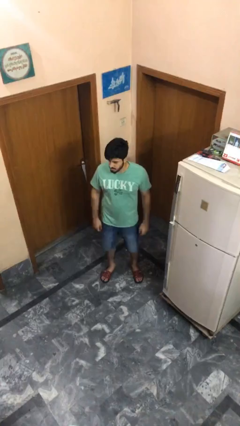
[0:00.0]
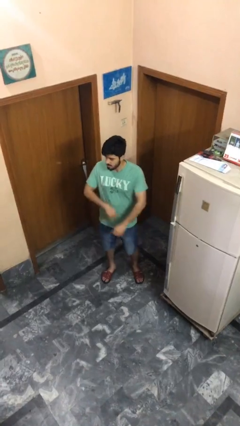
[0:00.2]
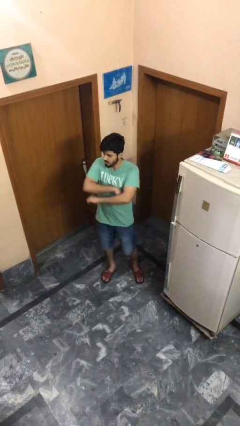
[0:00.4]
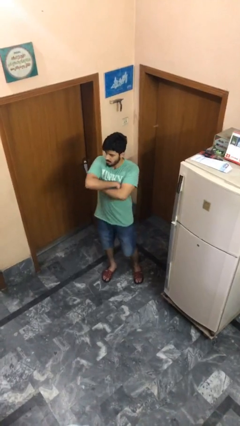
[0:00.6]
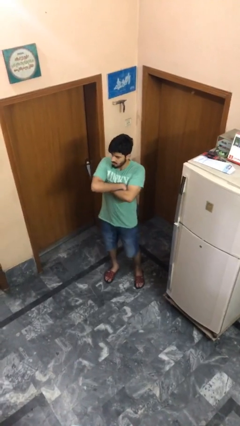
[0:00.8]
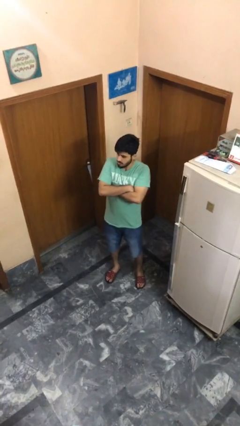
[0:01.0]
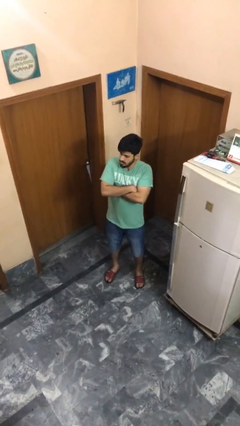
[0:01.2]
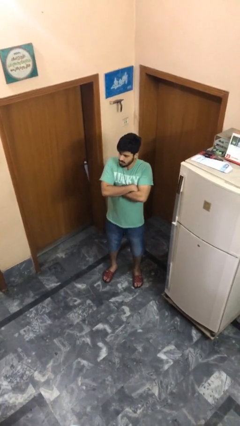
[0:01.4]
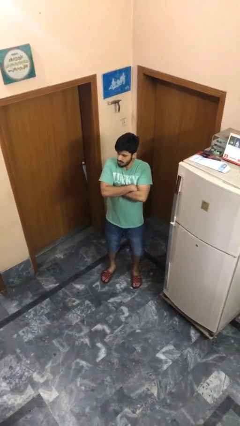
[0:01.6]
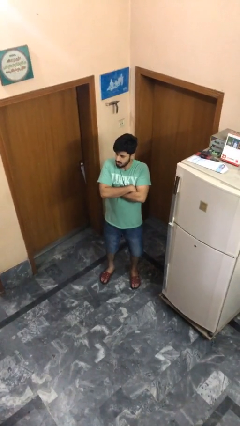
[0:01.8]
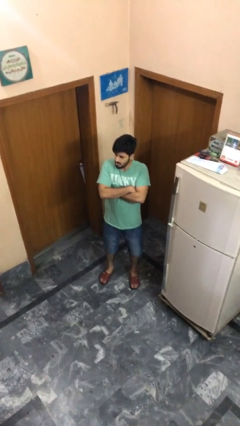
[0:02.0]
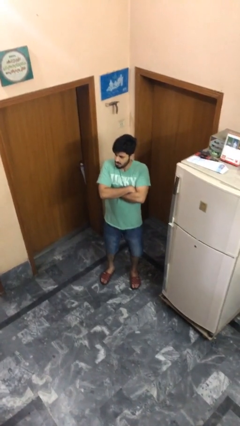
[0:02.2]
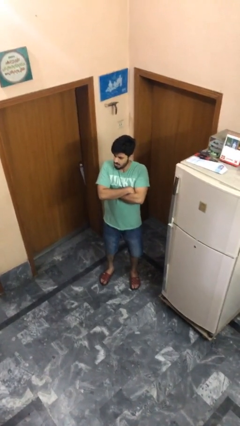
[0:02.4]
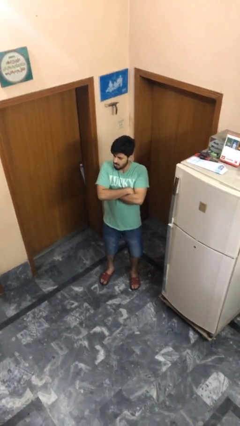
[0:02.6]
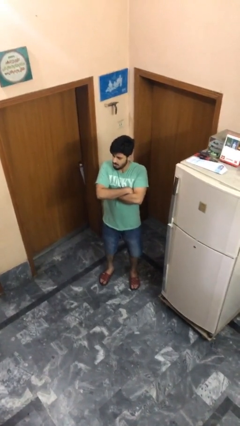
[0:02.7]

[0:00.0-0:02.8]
person crosses arms

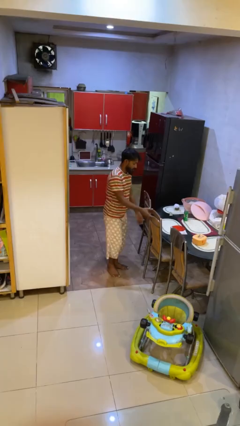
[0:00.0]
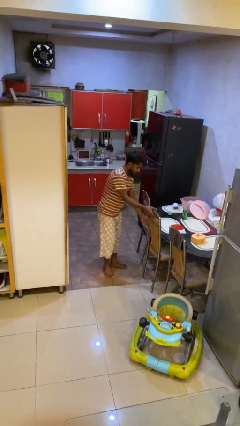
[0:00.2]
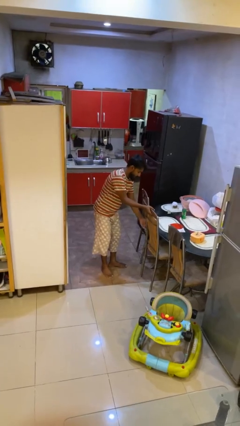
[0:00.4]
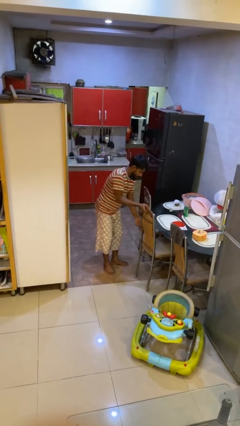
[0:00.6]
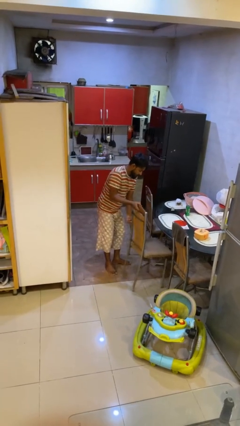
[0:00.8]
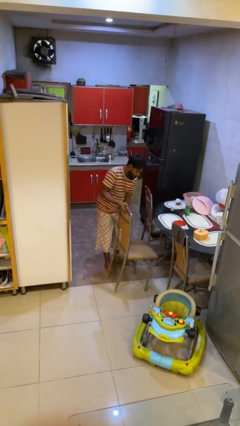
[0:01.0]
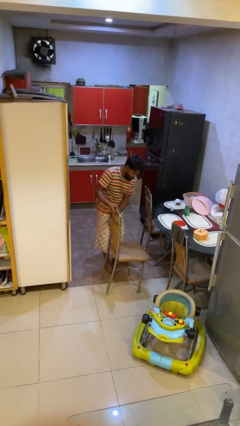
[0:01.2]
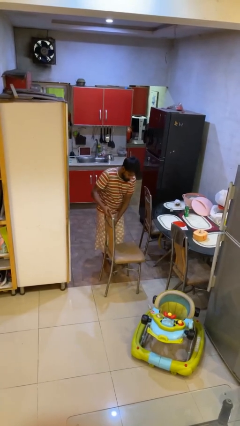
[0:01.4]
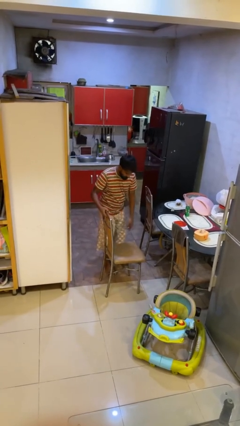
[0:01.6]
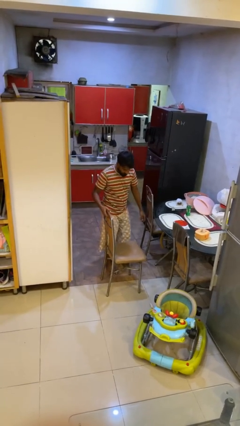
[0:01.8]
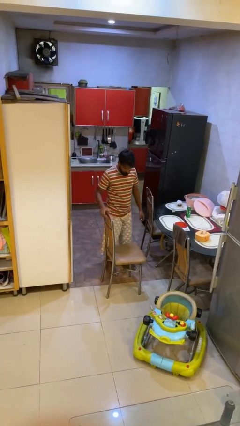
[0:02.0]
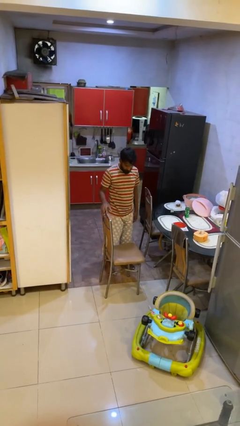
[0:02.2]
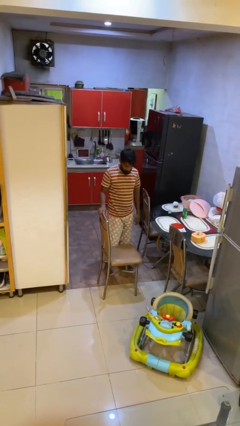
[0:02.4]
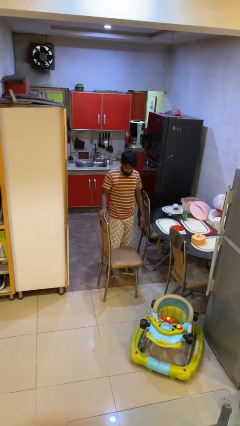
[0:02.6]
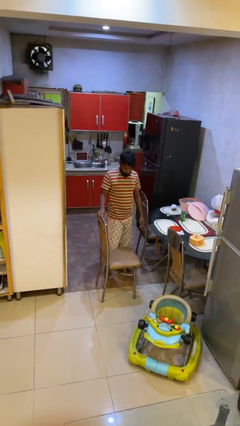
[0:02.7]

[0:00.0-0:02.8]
person pulls out chair

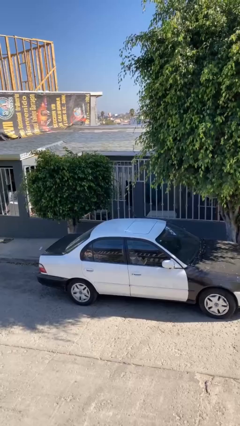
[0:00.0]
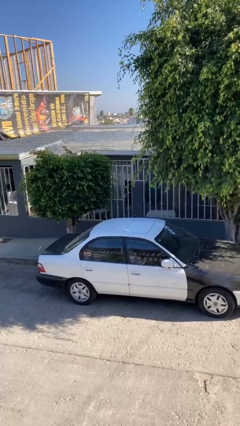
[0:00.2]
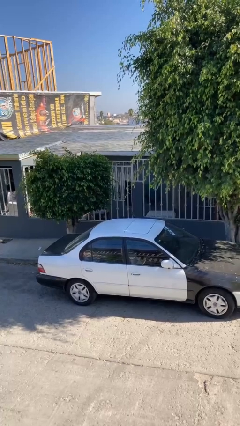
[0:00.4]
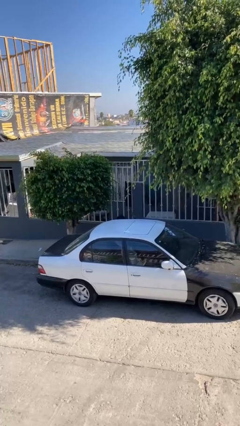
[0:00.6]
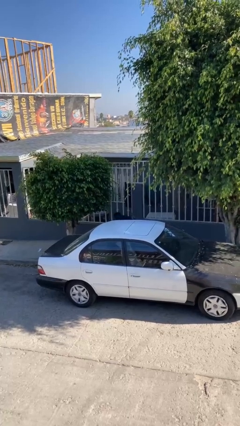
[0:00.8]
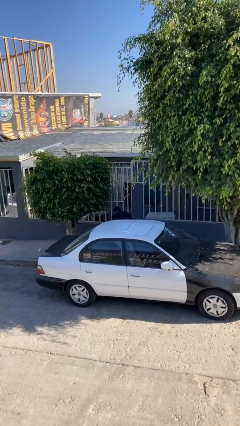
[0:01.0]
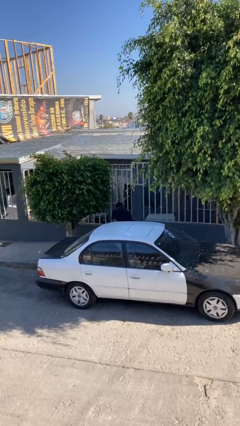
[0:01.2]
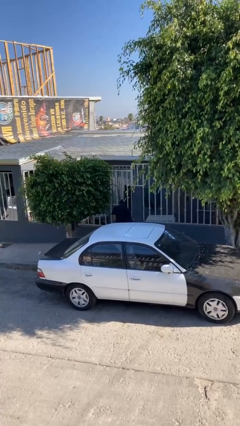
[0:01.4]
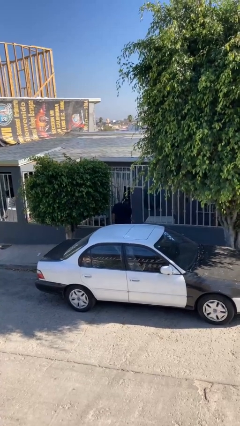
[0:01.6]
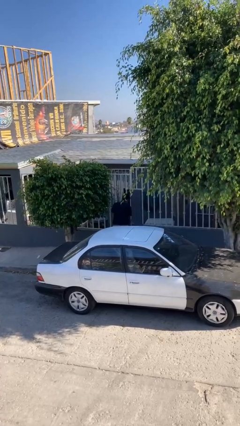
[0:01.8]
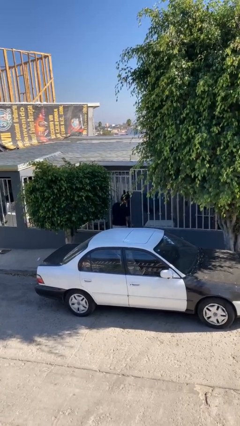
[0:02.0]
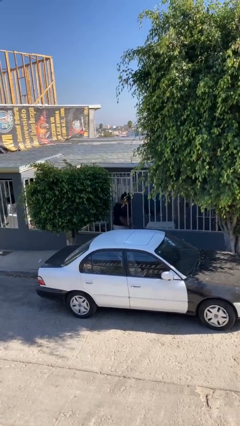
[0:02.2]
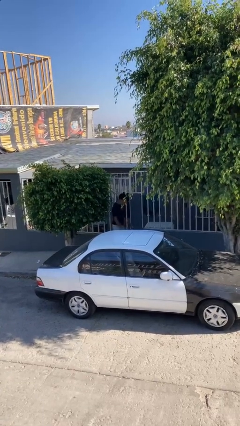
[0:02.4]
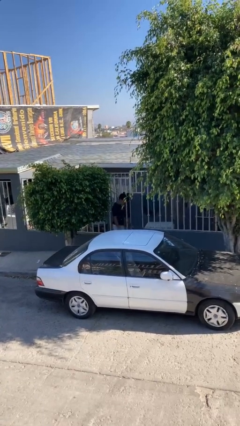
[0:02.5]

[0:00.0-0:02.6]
person exits car

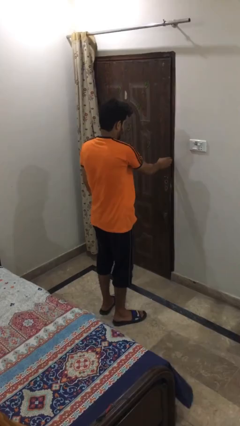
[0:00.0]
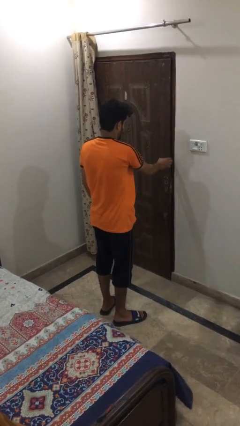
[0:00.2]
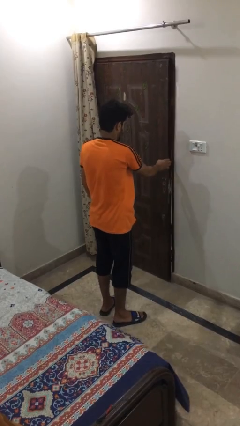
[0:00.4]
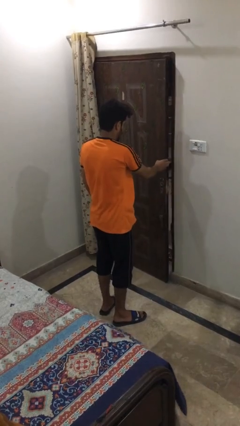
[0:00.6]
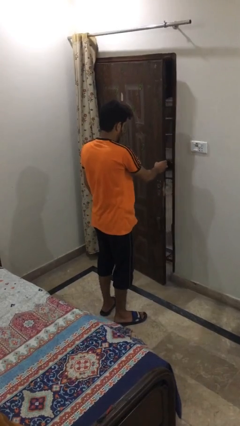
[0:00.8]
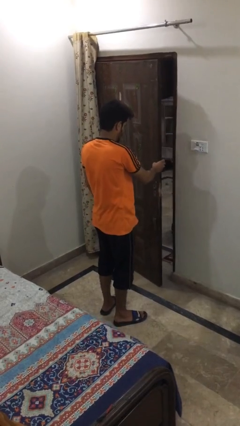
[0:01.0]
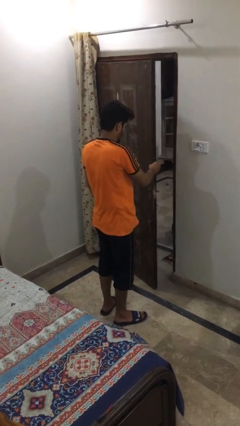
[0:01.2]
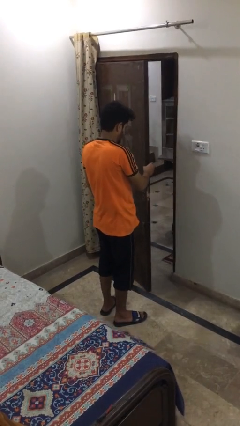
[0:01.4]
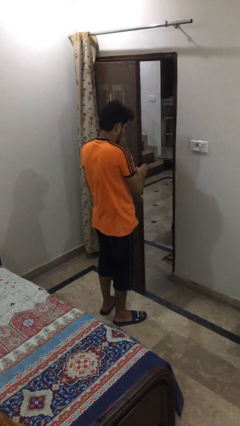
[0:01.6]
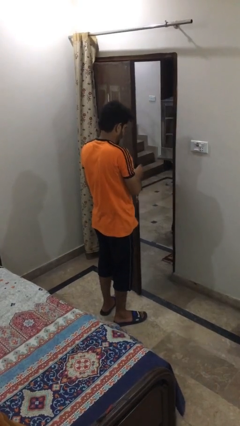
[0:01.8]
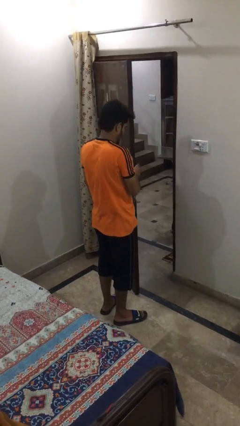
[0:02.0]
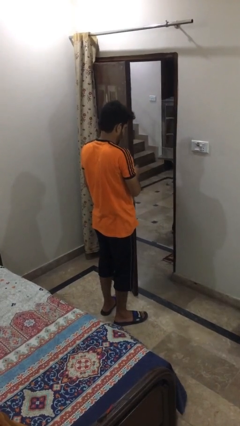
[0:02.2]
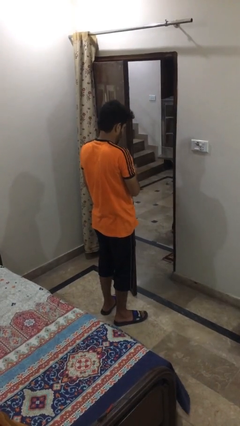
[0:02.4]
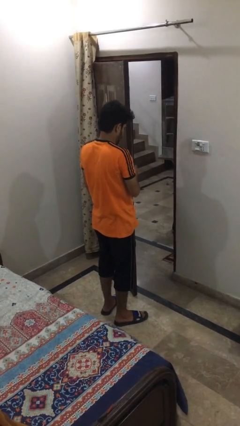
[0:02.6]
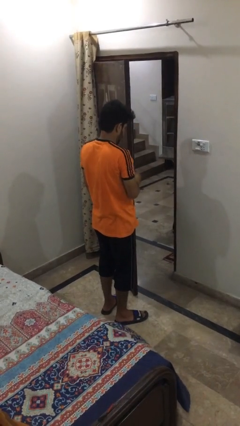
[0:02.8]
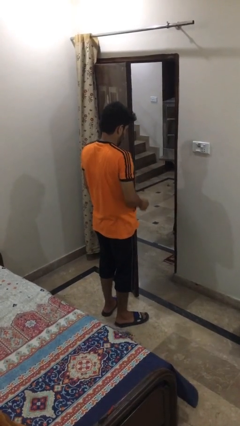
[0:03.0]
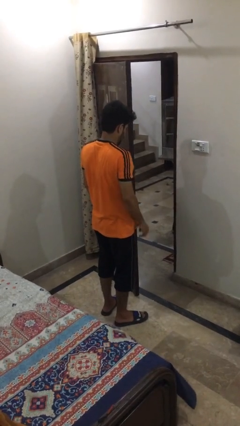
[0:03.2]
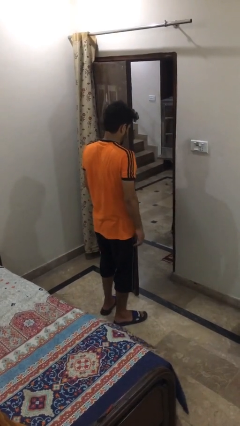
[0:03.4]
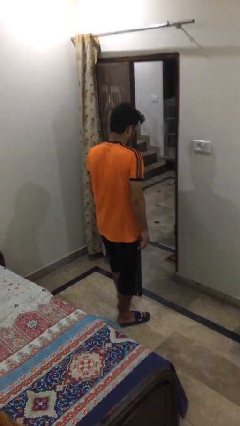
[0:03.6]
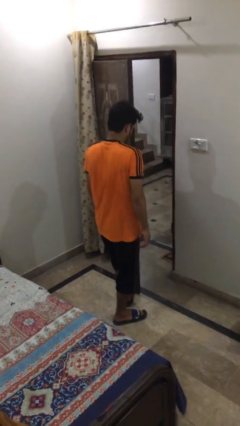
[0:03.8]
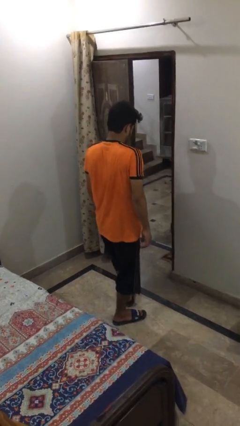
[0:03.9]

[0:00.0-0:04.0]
person opens facility door

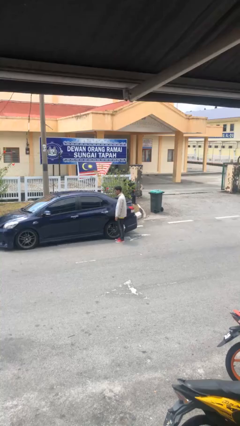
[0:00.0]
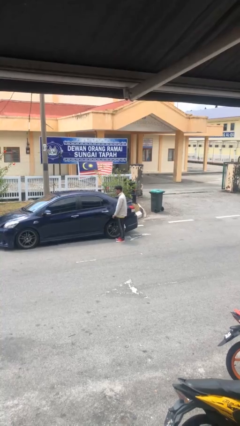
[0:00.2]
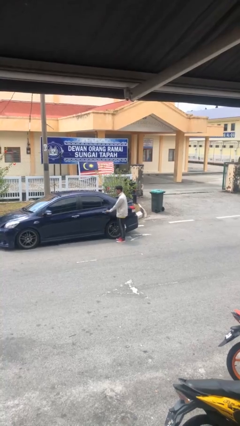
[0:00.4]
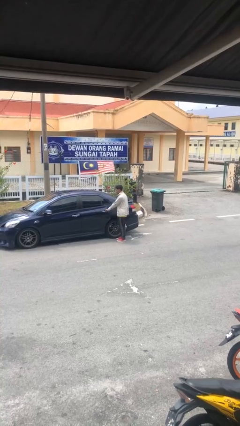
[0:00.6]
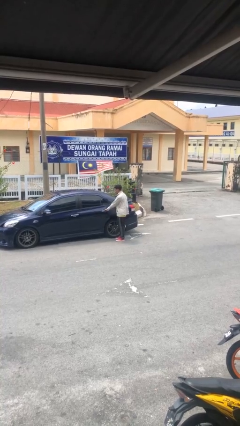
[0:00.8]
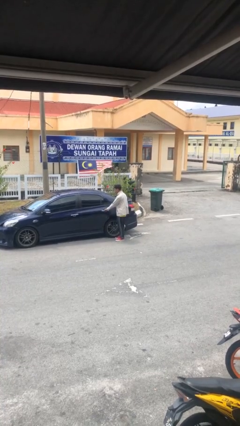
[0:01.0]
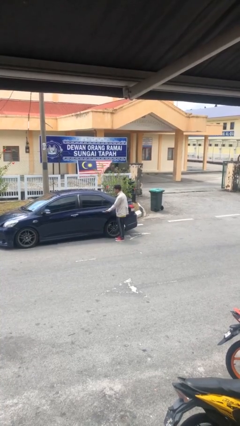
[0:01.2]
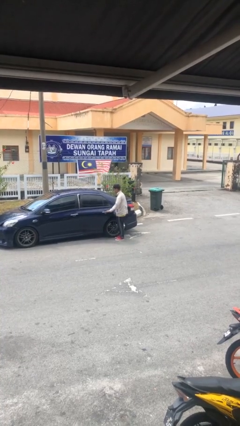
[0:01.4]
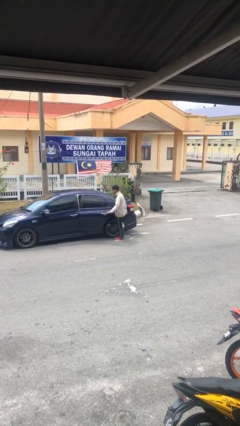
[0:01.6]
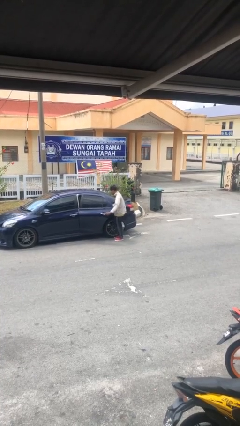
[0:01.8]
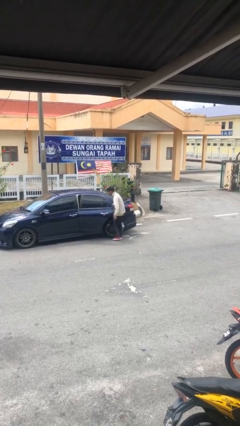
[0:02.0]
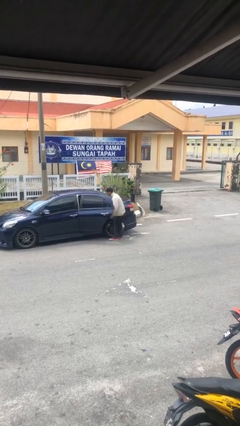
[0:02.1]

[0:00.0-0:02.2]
person opens car door

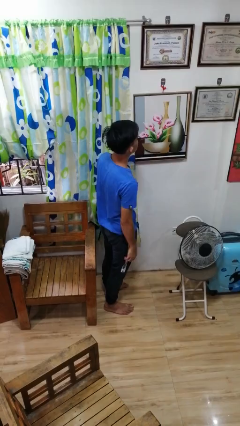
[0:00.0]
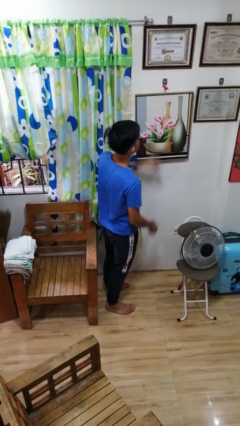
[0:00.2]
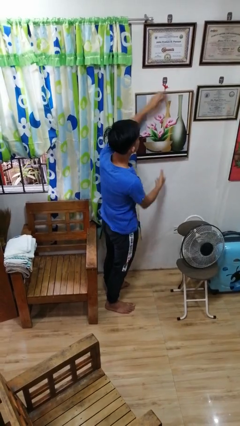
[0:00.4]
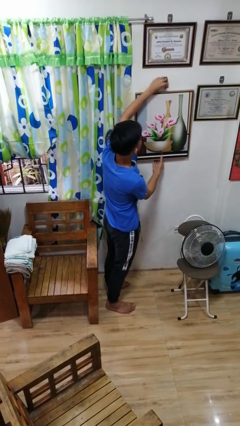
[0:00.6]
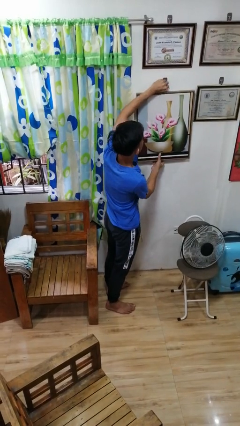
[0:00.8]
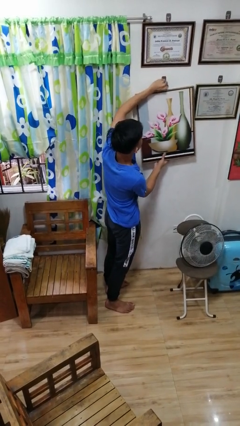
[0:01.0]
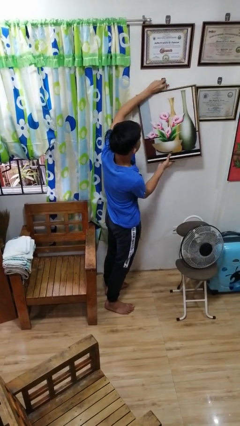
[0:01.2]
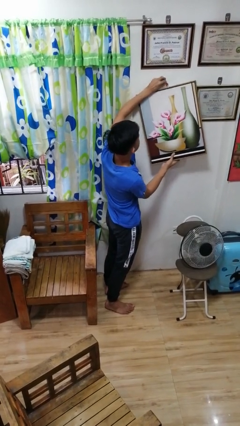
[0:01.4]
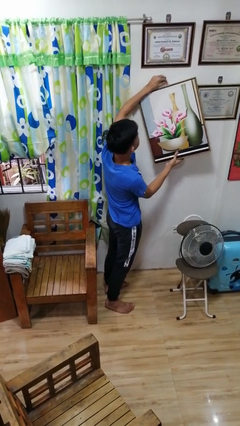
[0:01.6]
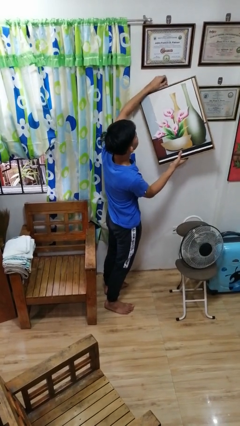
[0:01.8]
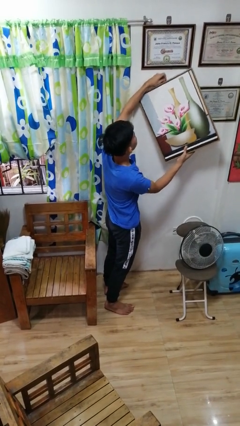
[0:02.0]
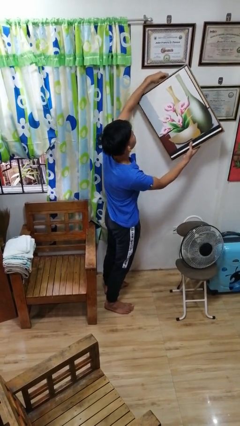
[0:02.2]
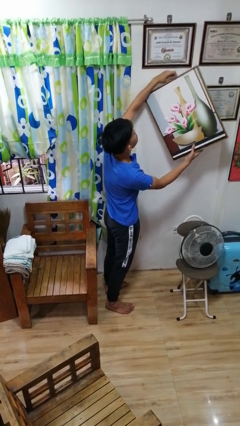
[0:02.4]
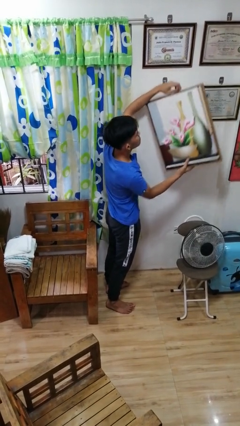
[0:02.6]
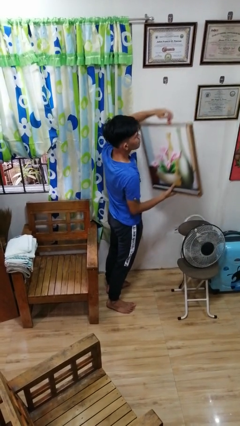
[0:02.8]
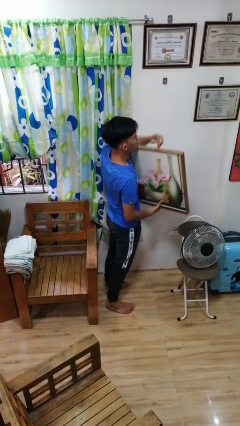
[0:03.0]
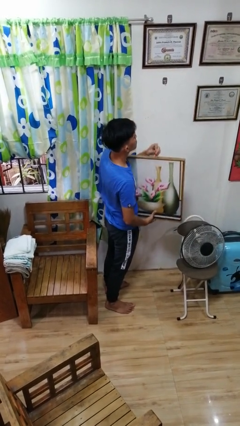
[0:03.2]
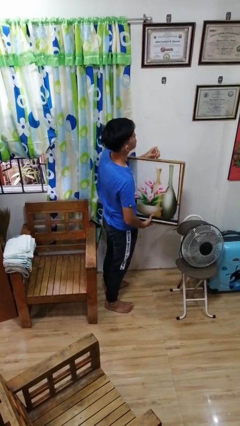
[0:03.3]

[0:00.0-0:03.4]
person takes down picture frame
